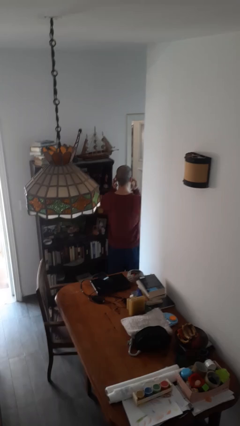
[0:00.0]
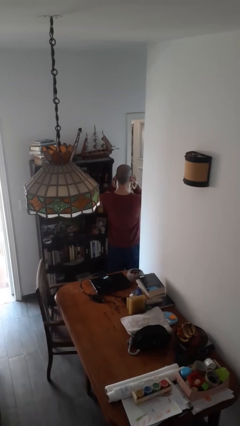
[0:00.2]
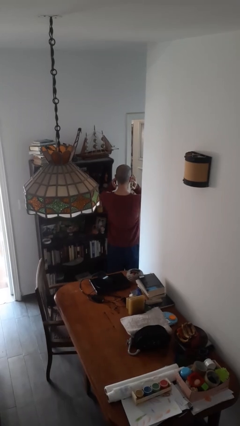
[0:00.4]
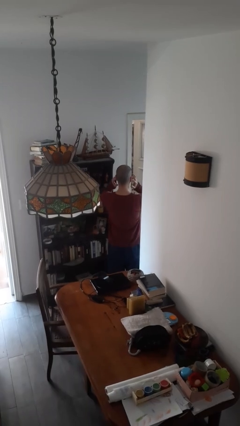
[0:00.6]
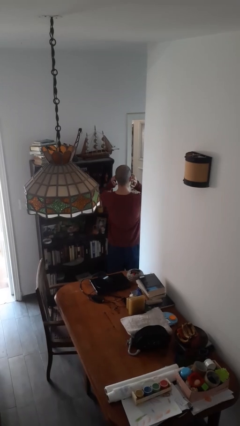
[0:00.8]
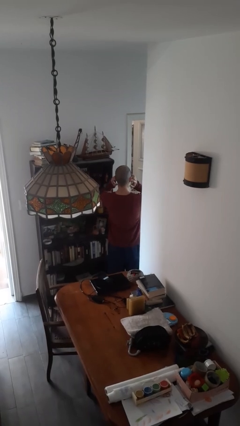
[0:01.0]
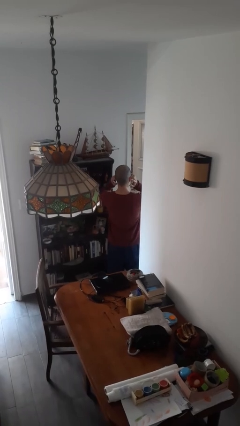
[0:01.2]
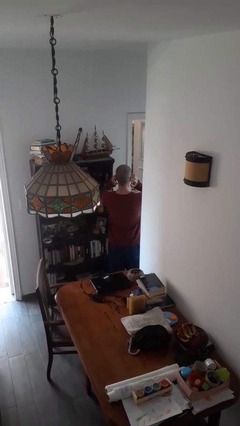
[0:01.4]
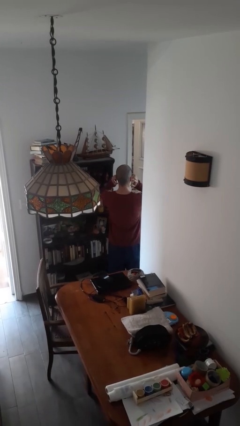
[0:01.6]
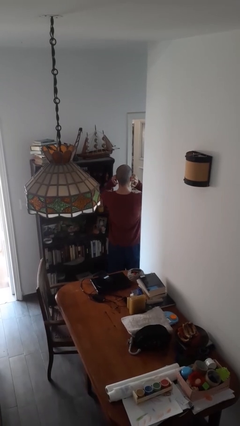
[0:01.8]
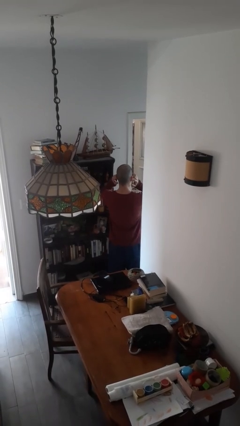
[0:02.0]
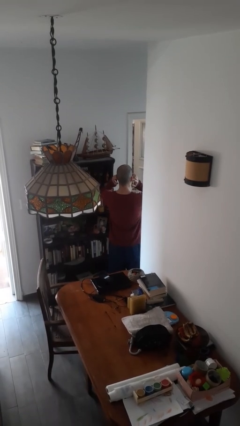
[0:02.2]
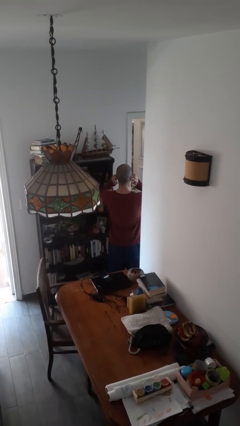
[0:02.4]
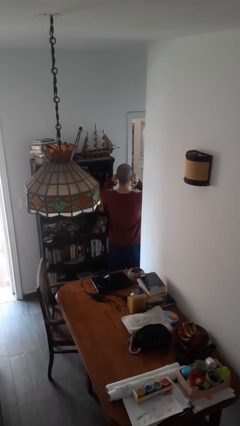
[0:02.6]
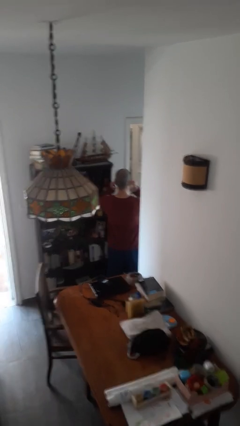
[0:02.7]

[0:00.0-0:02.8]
person puts fingers in ear

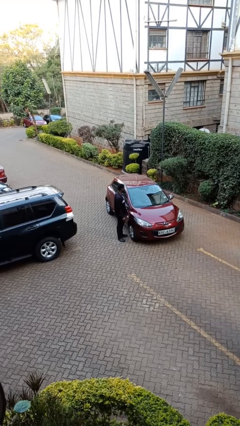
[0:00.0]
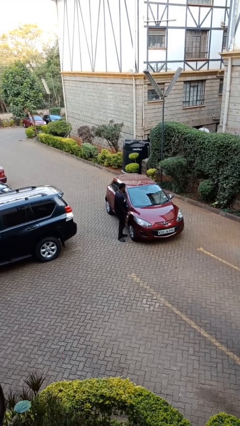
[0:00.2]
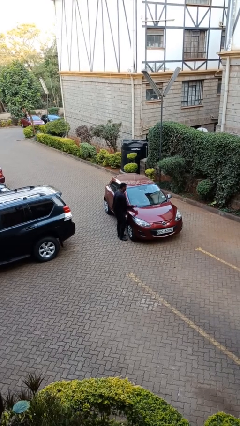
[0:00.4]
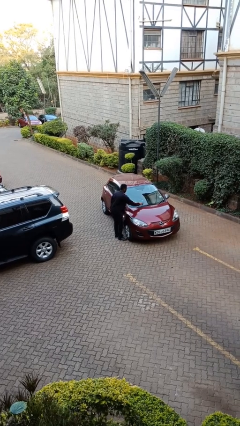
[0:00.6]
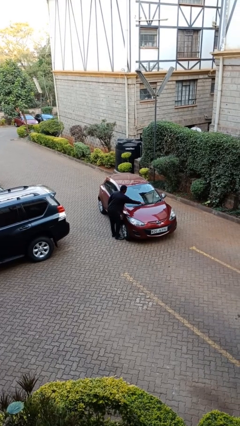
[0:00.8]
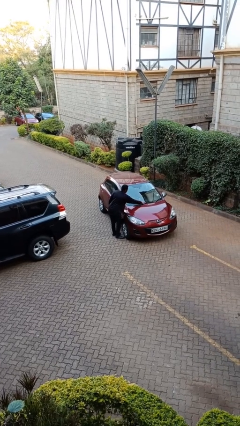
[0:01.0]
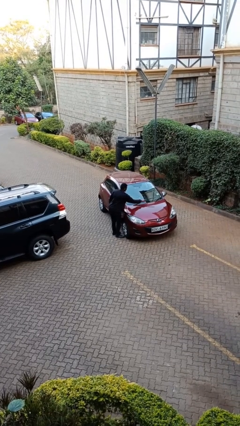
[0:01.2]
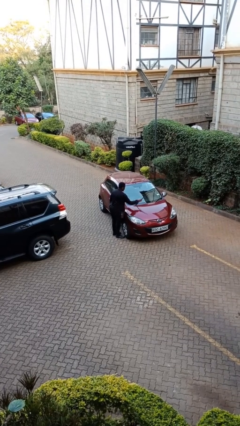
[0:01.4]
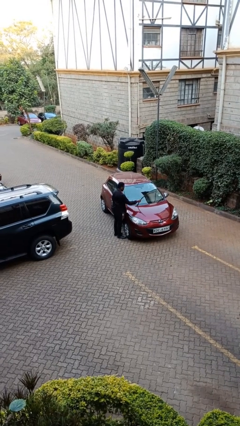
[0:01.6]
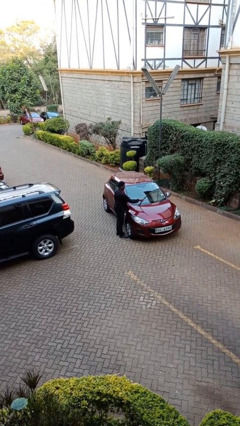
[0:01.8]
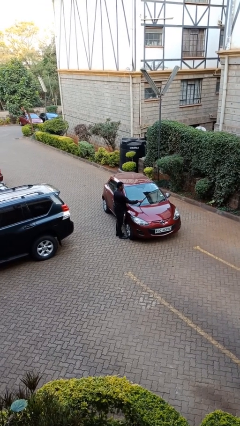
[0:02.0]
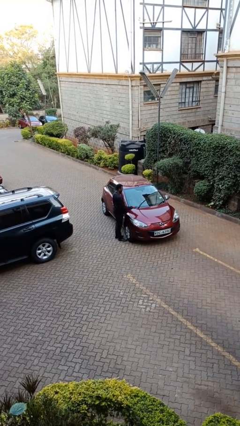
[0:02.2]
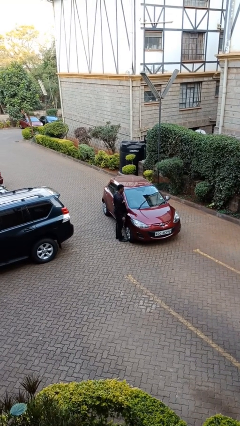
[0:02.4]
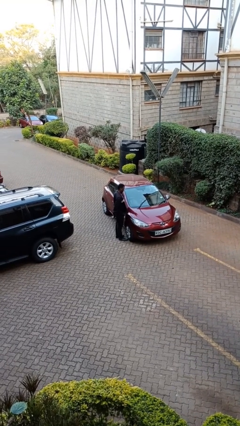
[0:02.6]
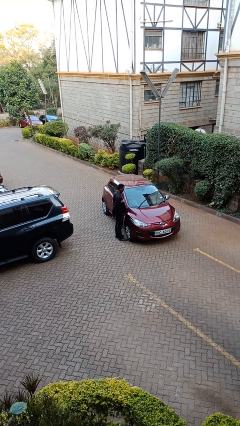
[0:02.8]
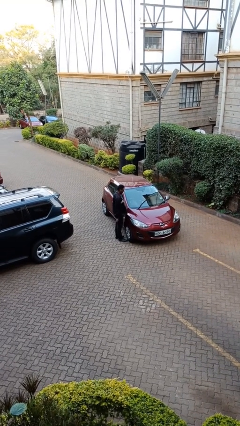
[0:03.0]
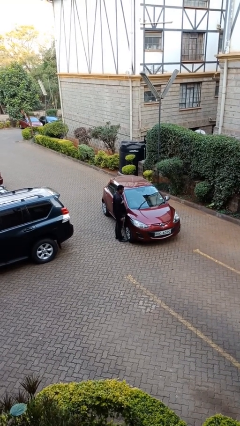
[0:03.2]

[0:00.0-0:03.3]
person flips up car wipers

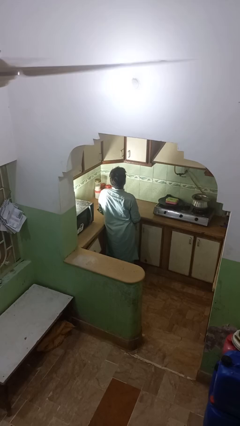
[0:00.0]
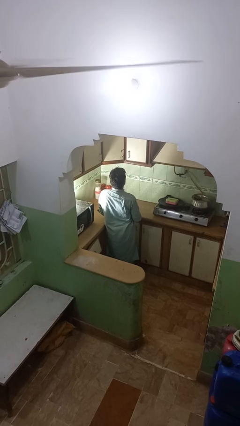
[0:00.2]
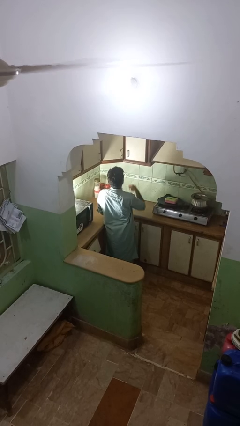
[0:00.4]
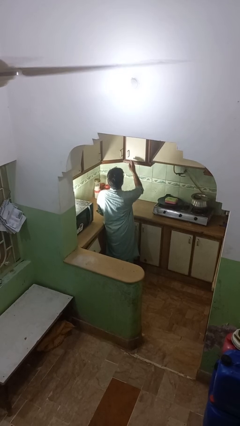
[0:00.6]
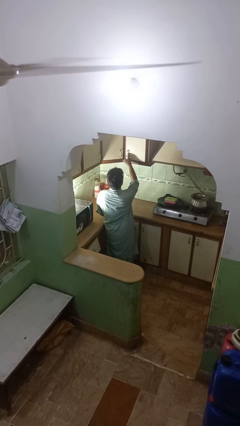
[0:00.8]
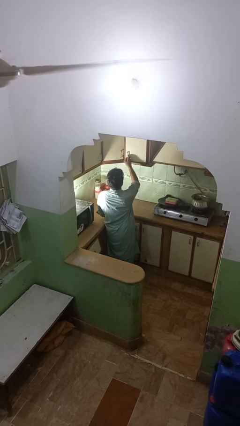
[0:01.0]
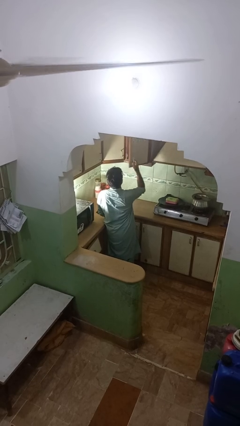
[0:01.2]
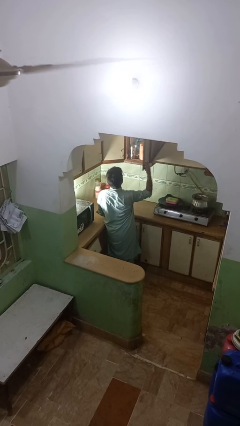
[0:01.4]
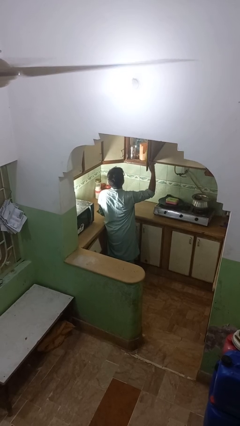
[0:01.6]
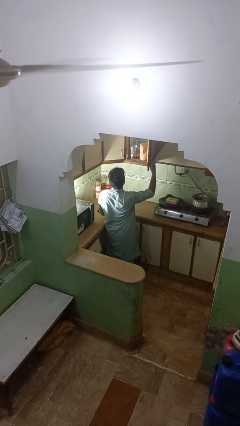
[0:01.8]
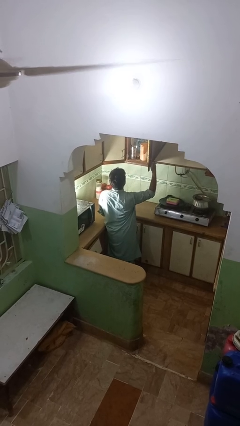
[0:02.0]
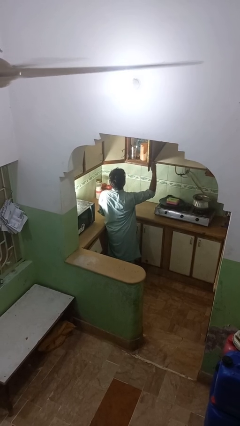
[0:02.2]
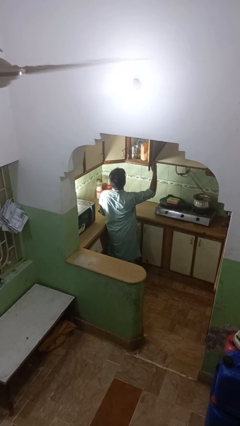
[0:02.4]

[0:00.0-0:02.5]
person opens kitchen drawer

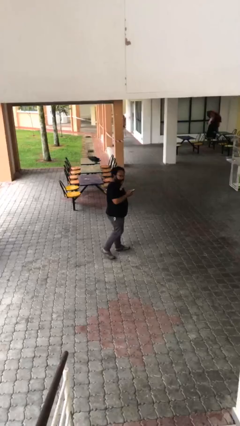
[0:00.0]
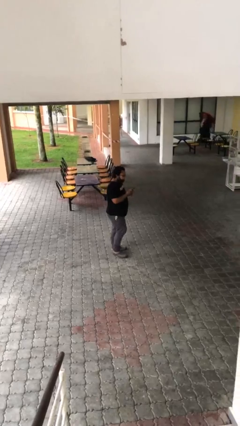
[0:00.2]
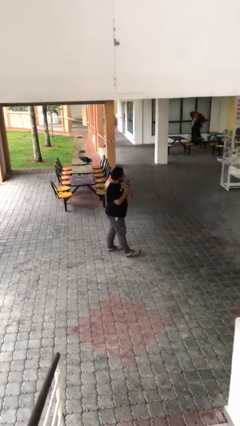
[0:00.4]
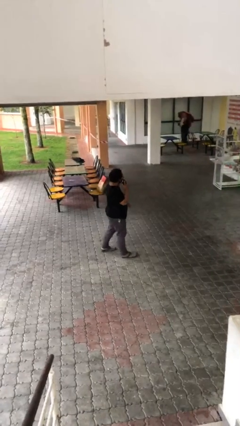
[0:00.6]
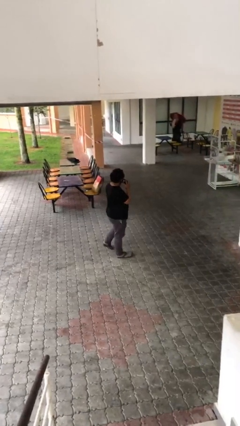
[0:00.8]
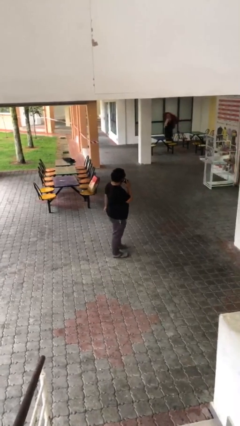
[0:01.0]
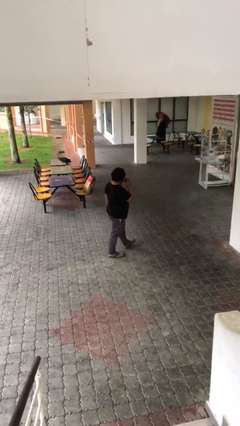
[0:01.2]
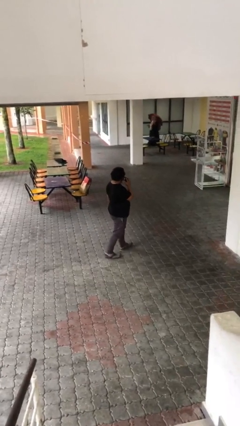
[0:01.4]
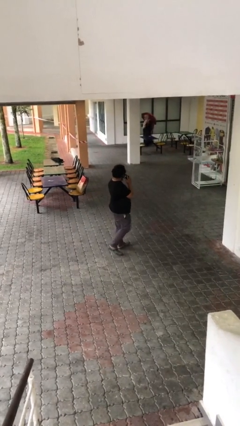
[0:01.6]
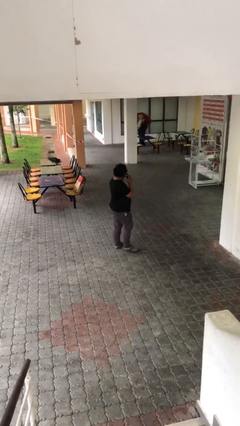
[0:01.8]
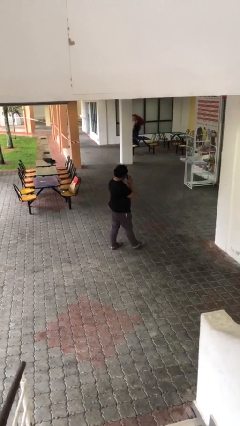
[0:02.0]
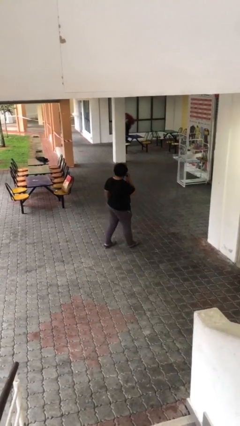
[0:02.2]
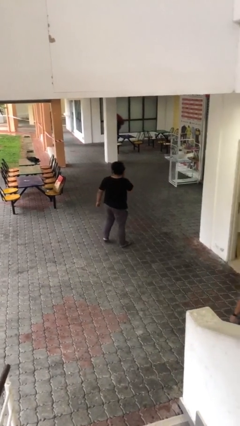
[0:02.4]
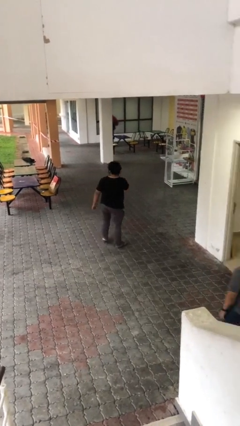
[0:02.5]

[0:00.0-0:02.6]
person talks on phone

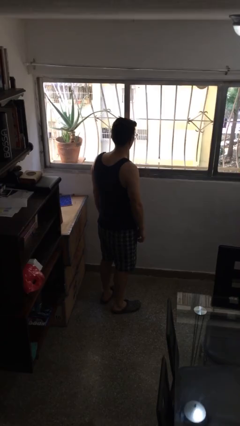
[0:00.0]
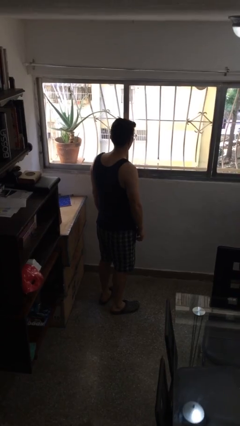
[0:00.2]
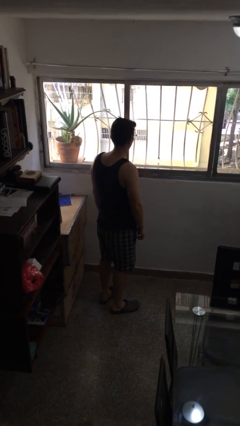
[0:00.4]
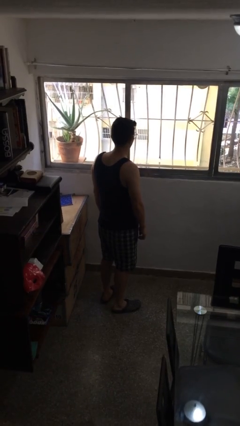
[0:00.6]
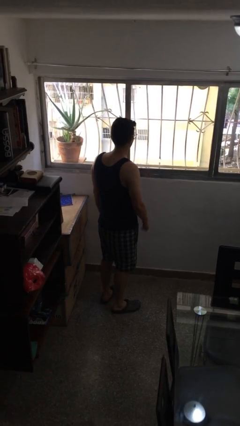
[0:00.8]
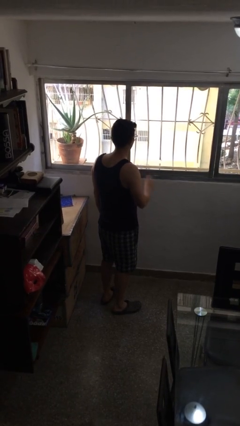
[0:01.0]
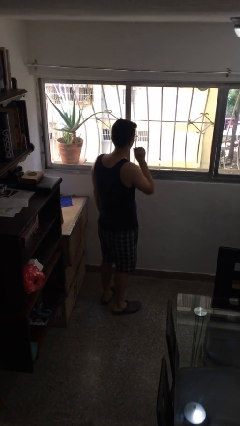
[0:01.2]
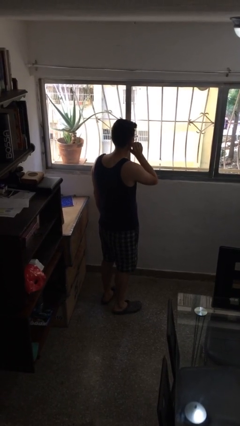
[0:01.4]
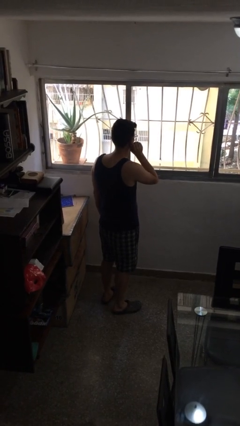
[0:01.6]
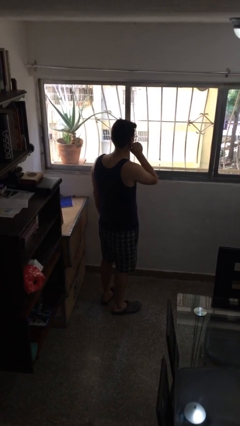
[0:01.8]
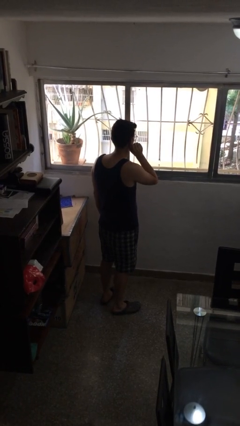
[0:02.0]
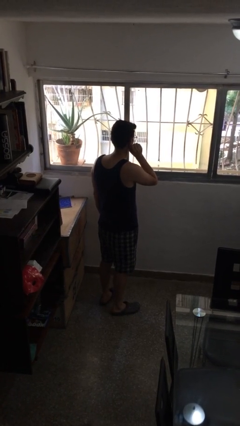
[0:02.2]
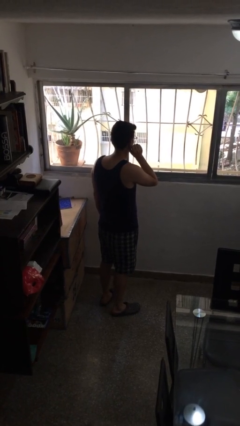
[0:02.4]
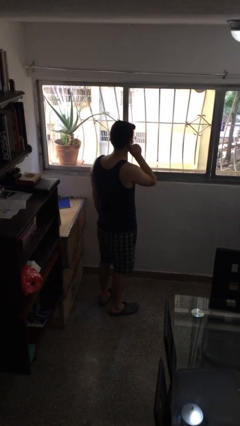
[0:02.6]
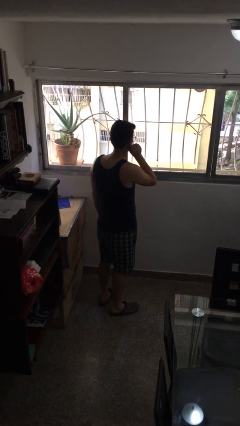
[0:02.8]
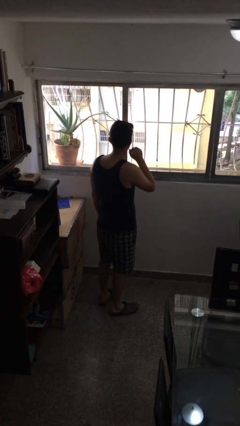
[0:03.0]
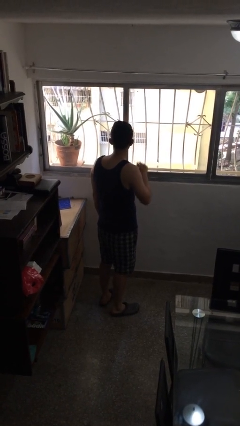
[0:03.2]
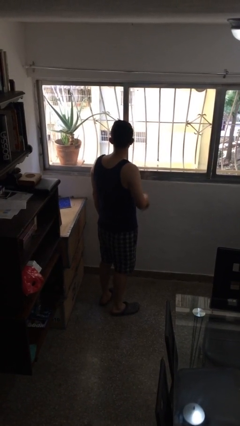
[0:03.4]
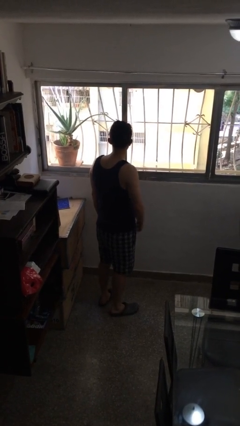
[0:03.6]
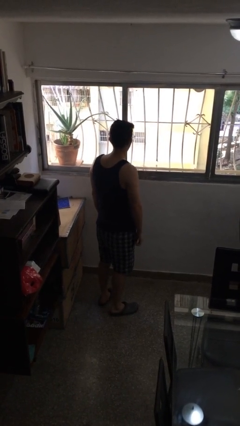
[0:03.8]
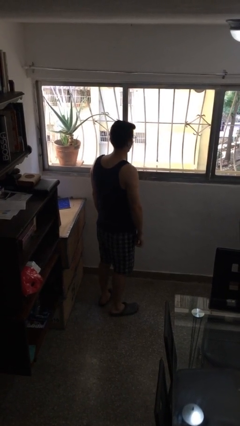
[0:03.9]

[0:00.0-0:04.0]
person touches earlobe

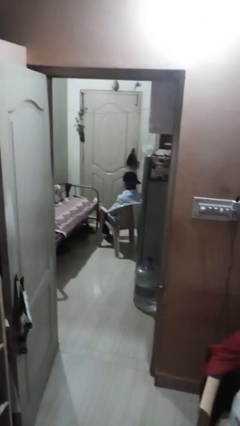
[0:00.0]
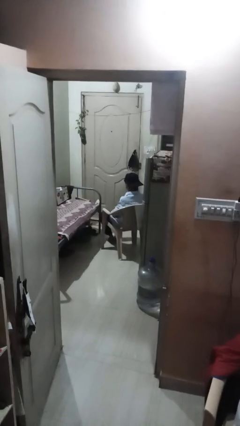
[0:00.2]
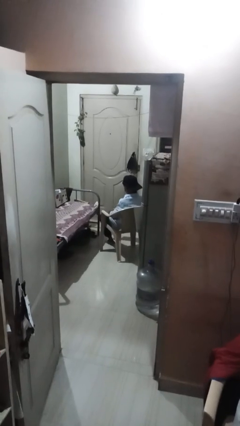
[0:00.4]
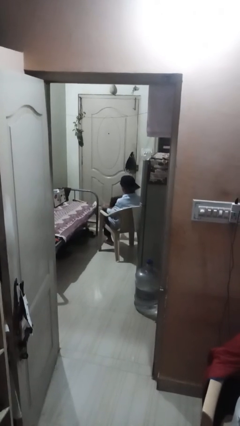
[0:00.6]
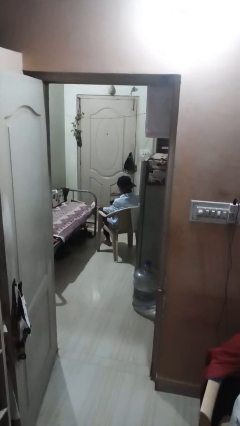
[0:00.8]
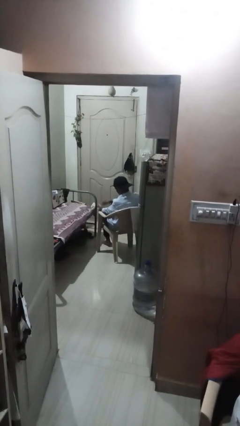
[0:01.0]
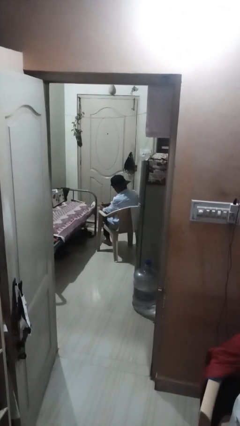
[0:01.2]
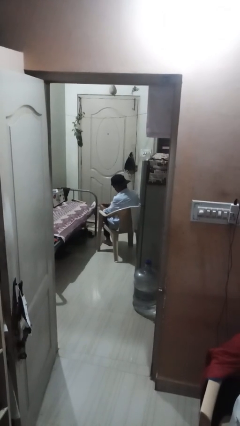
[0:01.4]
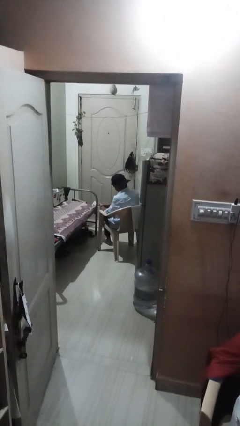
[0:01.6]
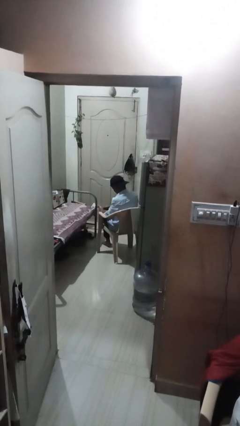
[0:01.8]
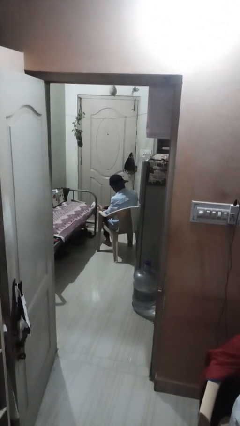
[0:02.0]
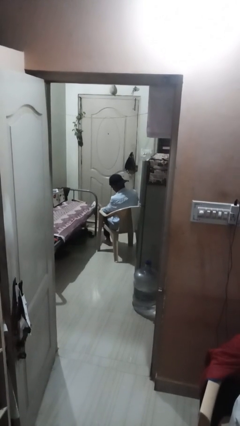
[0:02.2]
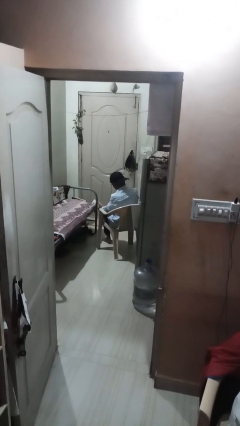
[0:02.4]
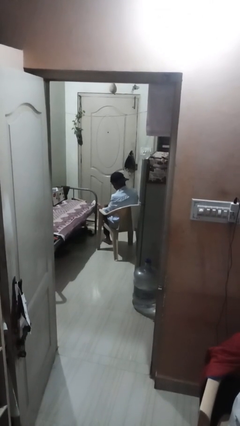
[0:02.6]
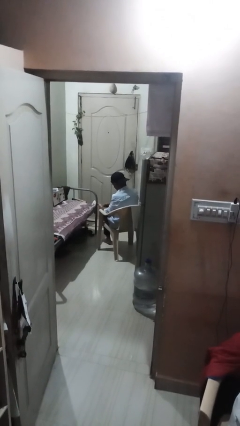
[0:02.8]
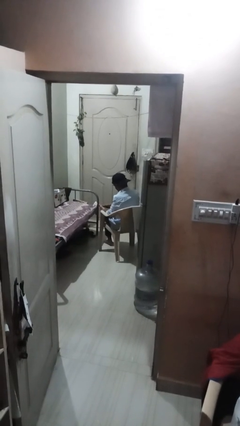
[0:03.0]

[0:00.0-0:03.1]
person rubs foot
